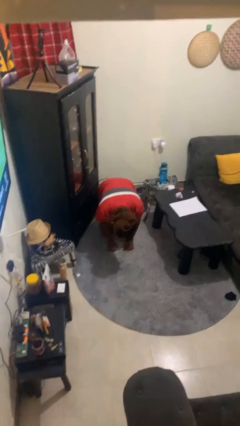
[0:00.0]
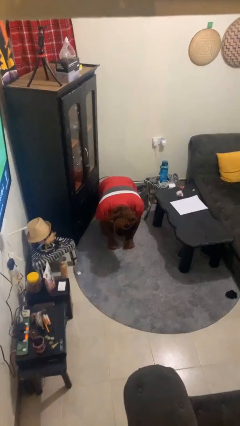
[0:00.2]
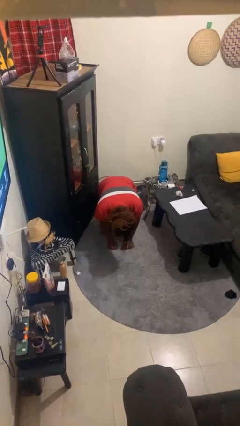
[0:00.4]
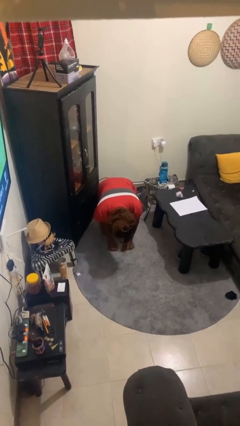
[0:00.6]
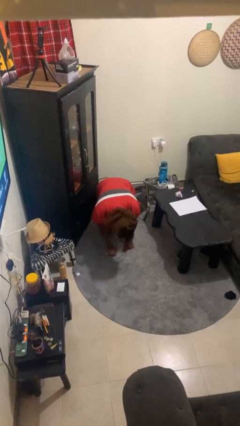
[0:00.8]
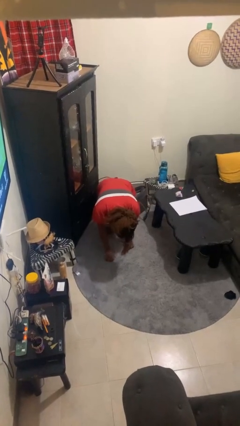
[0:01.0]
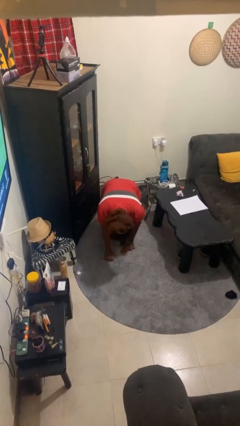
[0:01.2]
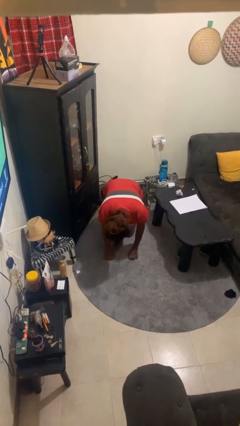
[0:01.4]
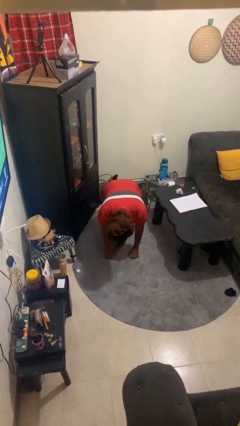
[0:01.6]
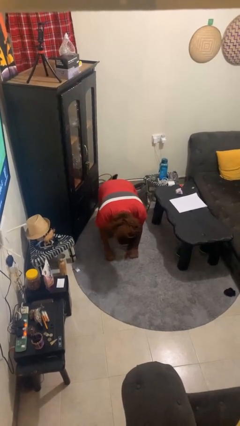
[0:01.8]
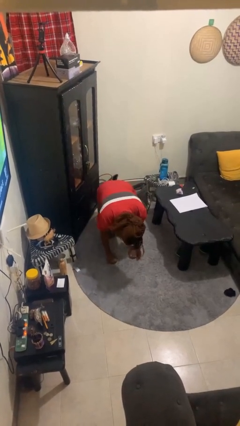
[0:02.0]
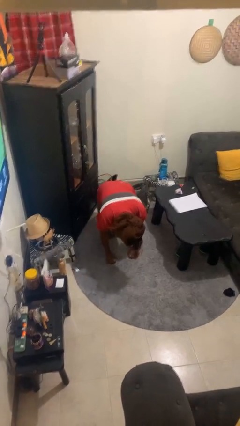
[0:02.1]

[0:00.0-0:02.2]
person crawls

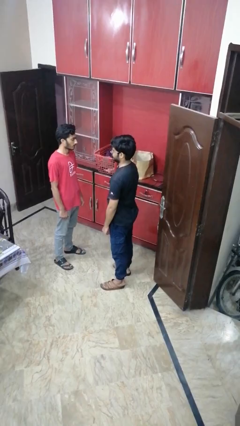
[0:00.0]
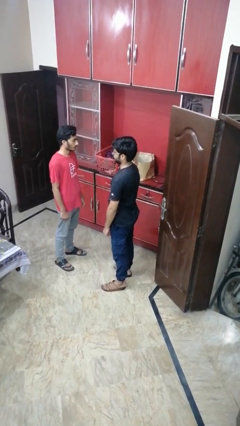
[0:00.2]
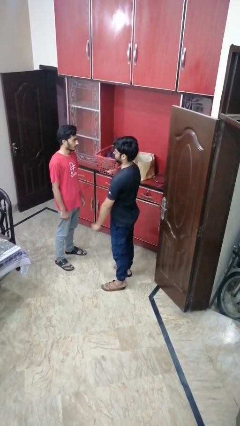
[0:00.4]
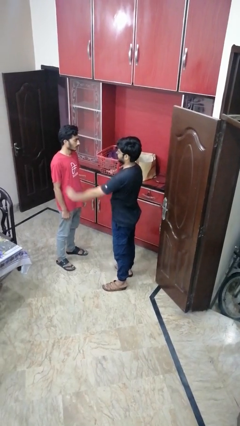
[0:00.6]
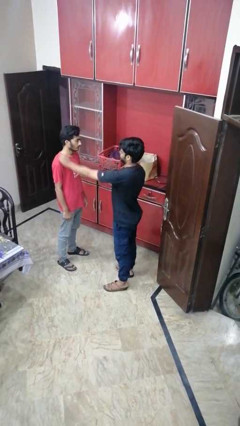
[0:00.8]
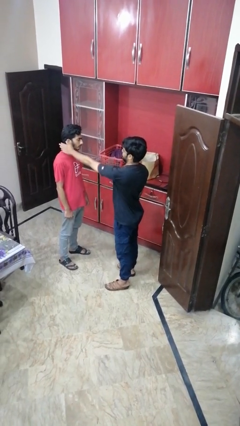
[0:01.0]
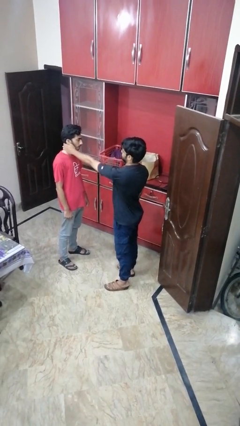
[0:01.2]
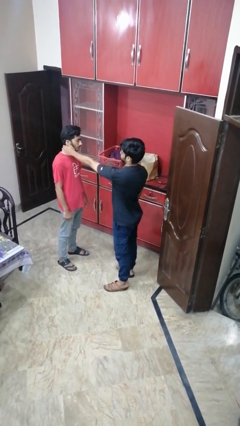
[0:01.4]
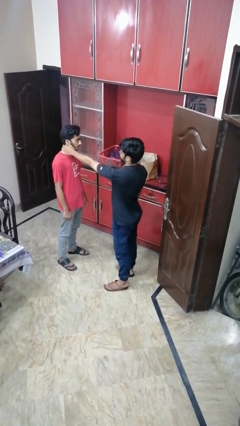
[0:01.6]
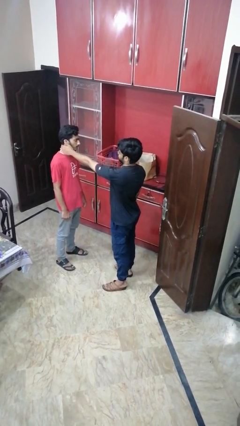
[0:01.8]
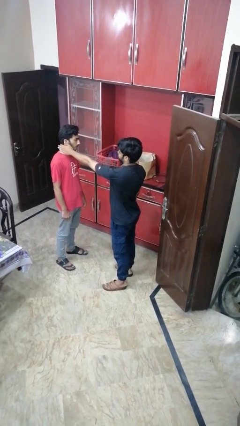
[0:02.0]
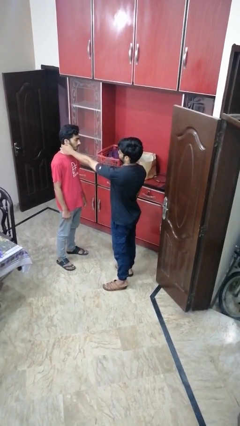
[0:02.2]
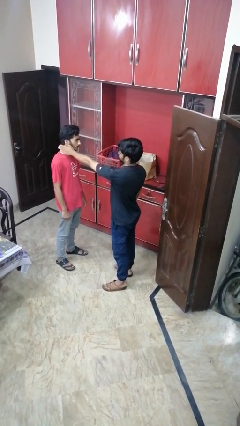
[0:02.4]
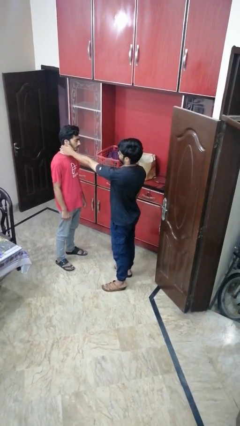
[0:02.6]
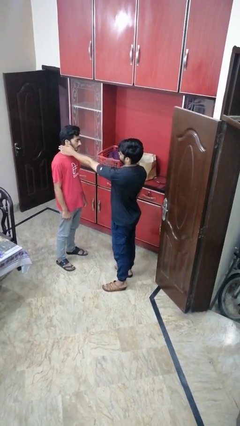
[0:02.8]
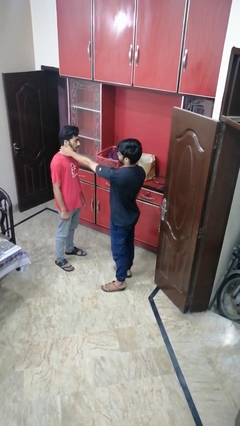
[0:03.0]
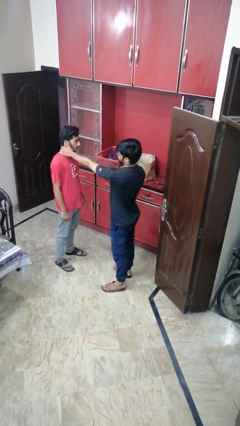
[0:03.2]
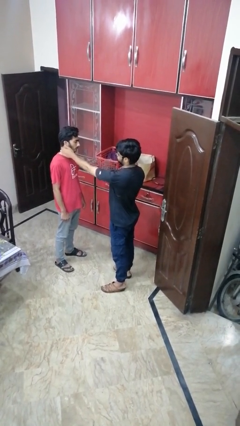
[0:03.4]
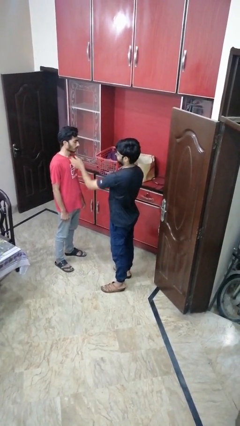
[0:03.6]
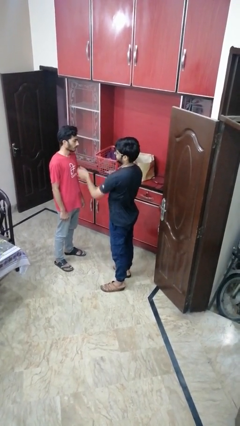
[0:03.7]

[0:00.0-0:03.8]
person touches face of person

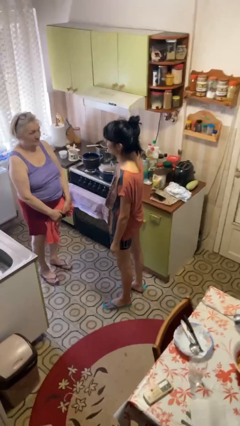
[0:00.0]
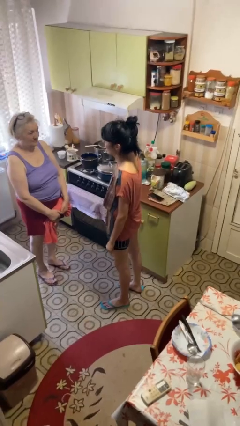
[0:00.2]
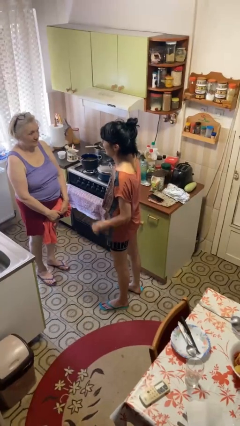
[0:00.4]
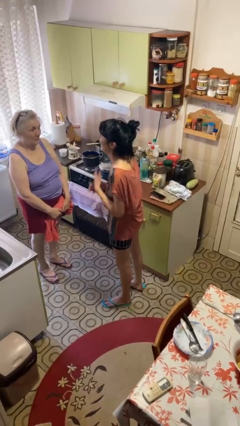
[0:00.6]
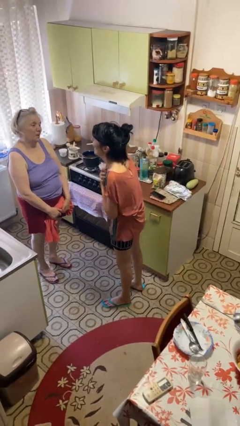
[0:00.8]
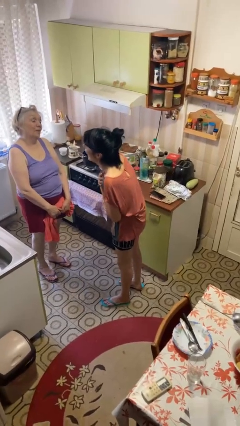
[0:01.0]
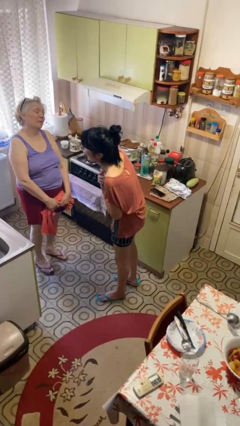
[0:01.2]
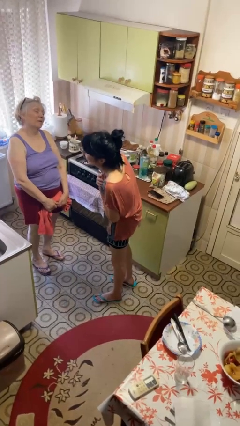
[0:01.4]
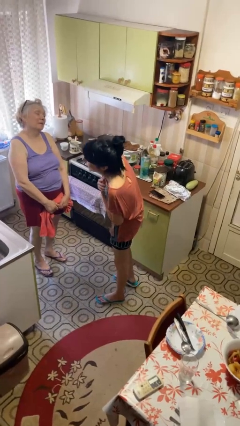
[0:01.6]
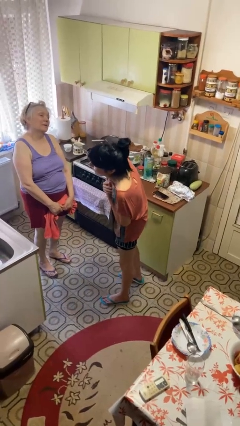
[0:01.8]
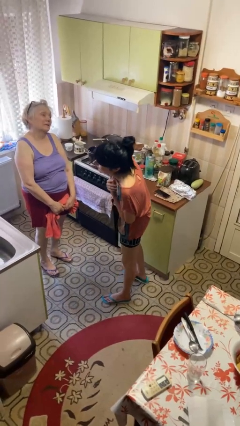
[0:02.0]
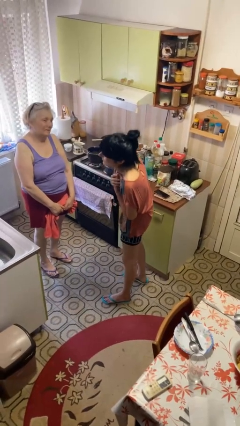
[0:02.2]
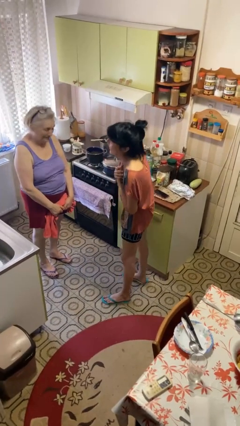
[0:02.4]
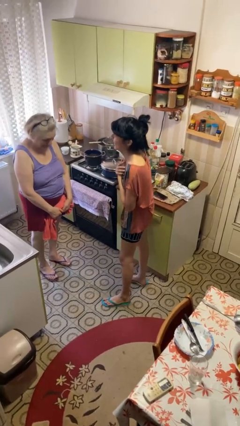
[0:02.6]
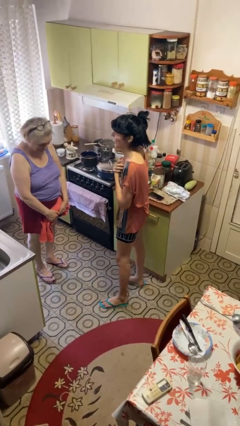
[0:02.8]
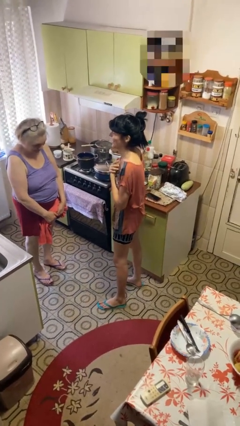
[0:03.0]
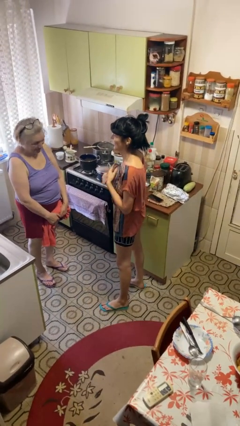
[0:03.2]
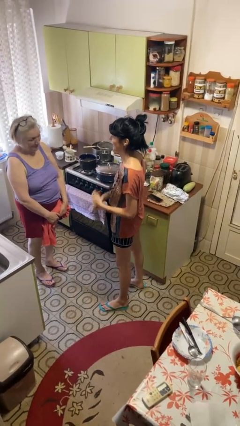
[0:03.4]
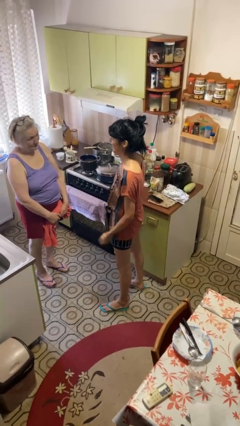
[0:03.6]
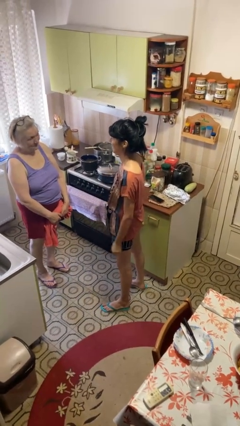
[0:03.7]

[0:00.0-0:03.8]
person laughs with person

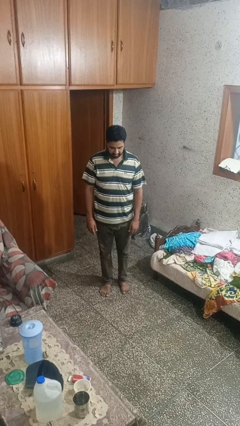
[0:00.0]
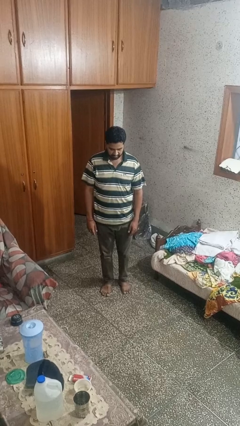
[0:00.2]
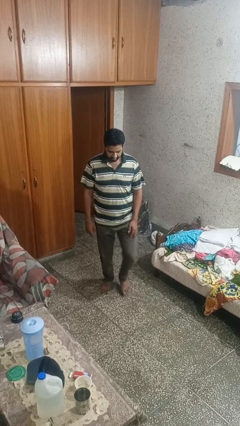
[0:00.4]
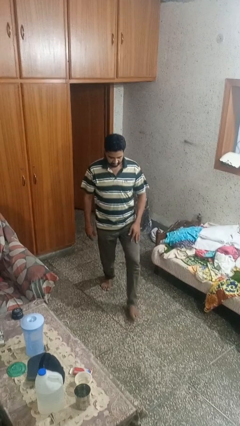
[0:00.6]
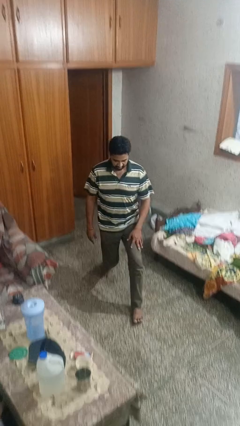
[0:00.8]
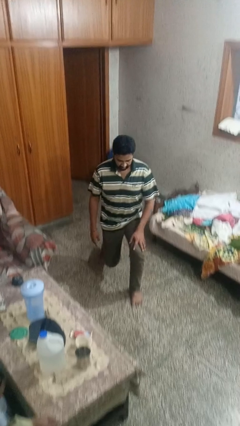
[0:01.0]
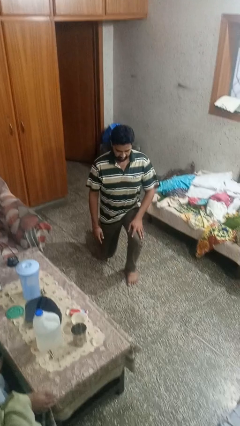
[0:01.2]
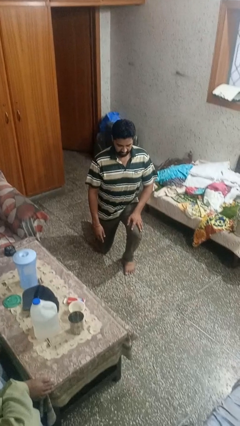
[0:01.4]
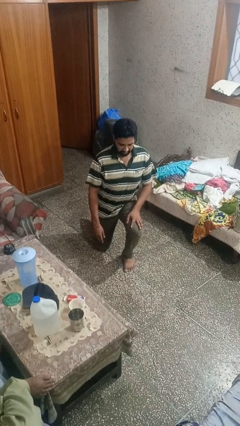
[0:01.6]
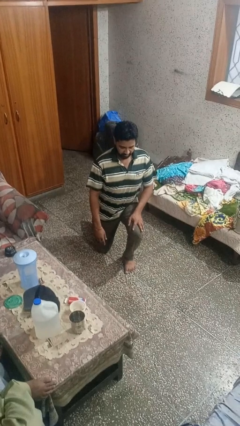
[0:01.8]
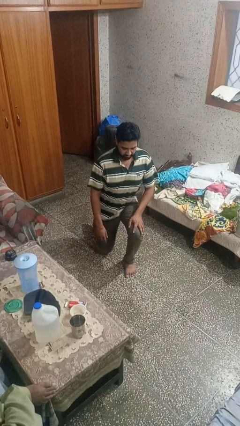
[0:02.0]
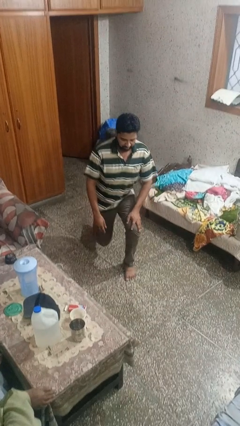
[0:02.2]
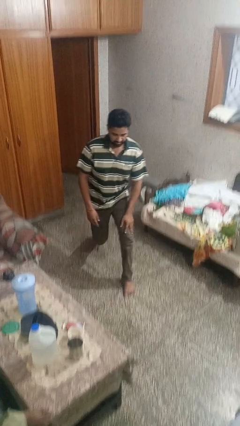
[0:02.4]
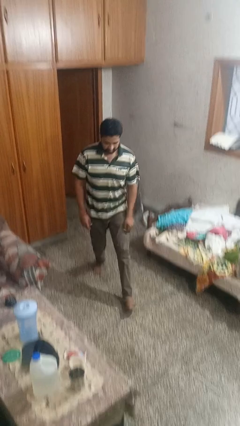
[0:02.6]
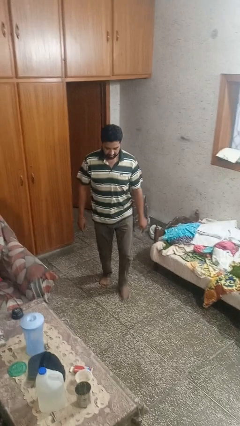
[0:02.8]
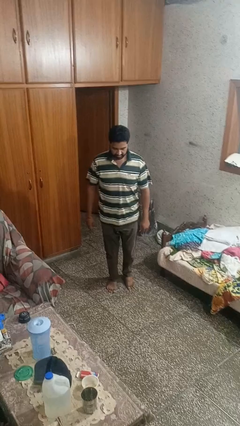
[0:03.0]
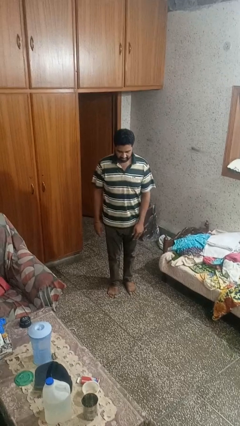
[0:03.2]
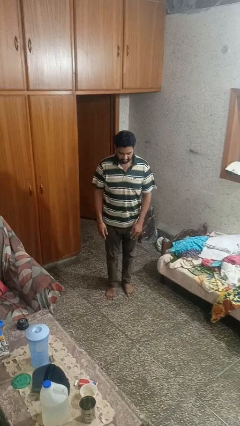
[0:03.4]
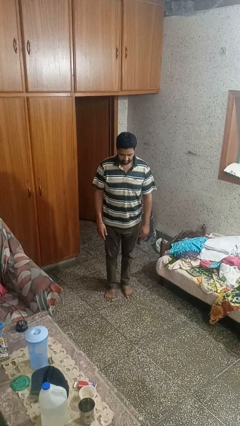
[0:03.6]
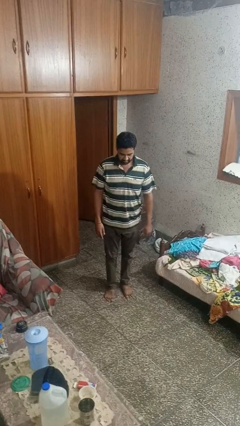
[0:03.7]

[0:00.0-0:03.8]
person exercises with lunges

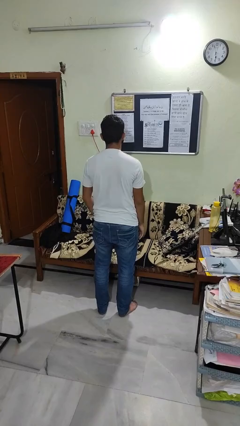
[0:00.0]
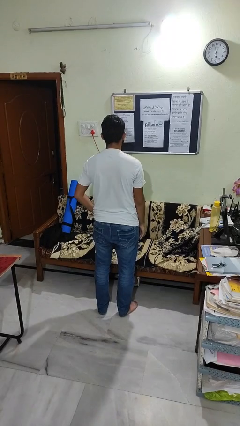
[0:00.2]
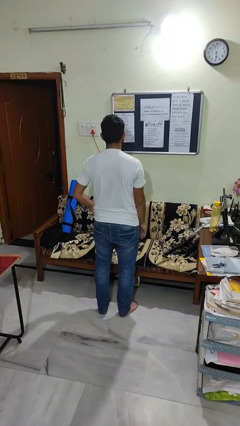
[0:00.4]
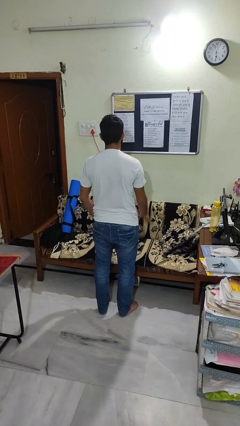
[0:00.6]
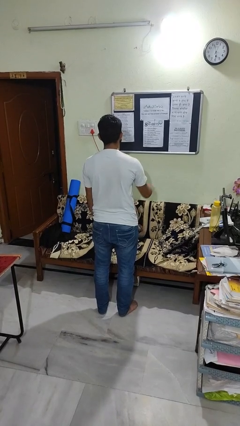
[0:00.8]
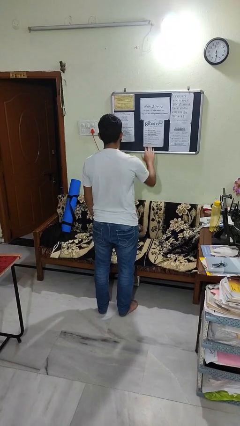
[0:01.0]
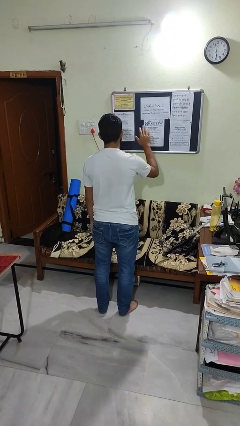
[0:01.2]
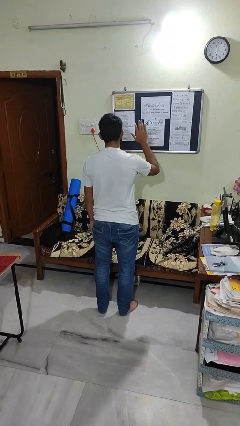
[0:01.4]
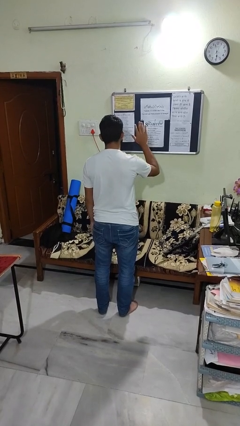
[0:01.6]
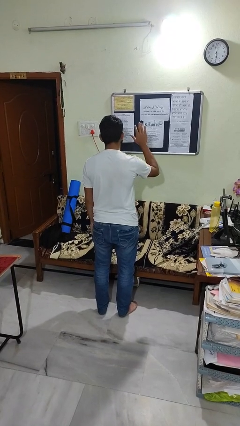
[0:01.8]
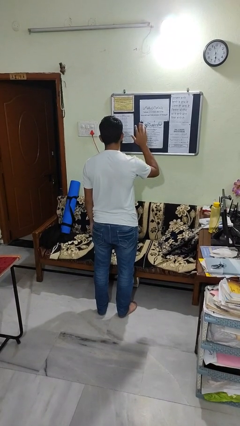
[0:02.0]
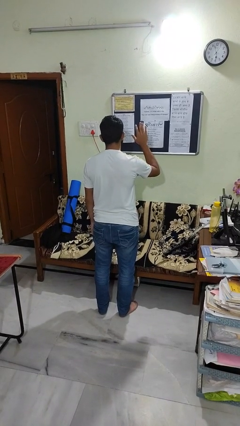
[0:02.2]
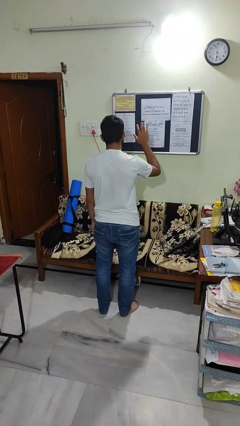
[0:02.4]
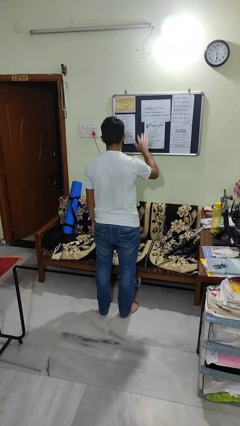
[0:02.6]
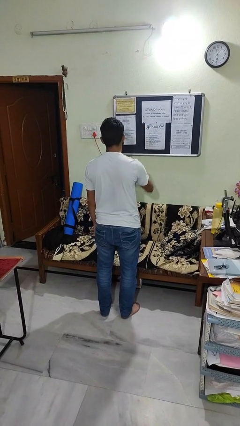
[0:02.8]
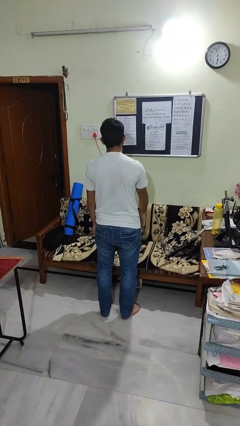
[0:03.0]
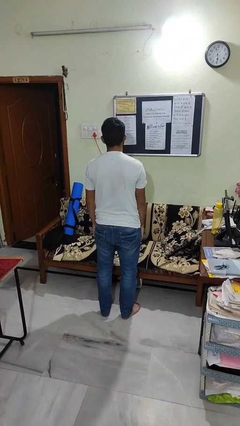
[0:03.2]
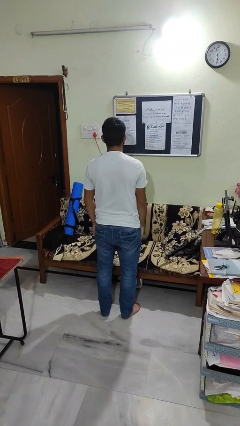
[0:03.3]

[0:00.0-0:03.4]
person gestures number five

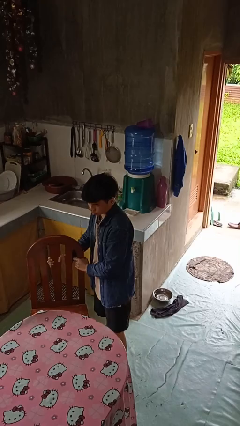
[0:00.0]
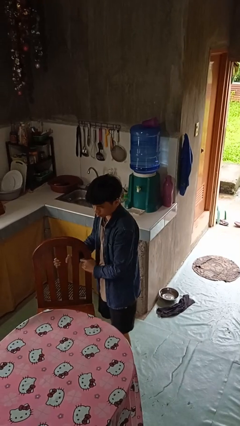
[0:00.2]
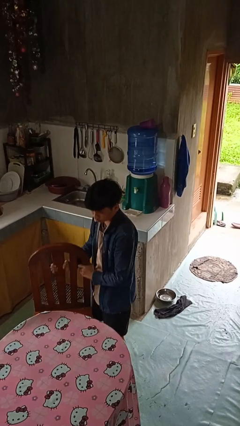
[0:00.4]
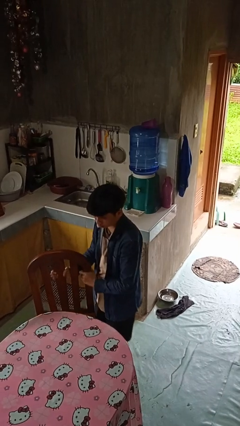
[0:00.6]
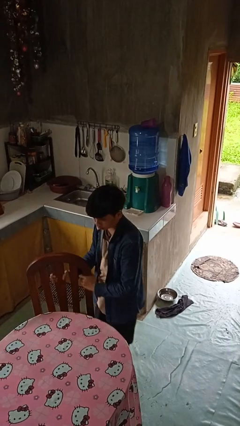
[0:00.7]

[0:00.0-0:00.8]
person pushes in chair
